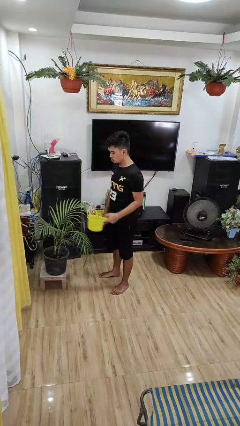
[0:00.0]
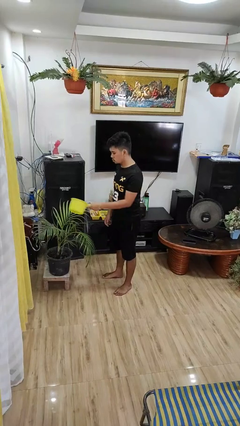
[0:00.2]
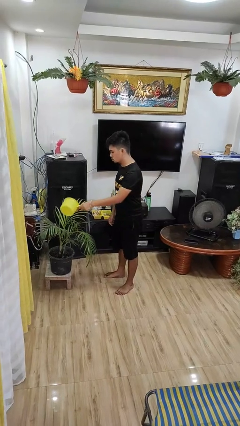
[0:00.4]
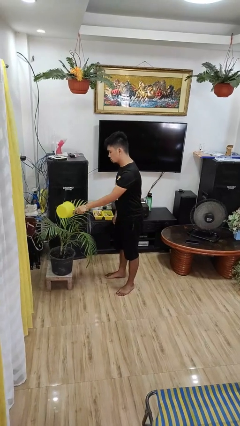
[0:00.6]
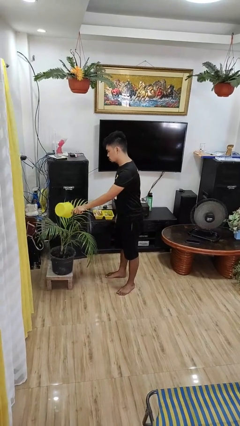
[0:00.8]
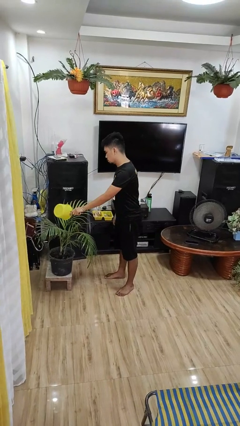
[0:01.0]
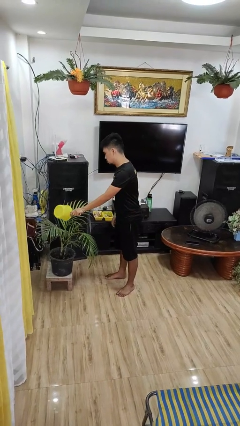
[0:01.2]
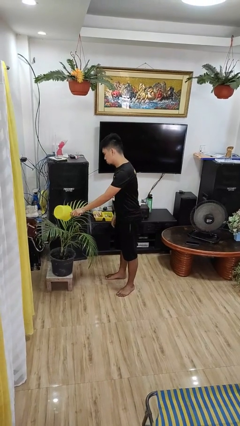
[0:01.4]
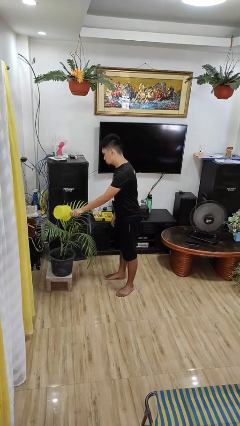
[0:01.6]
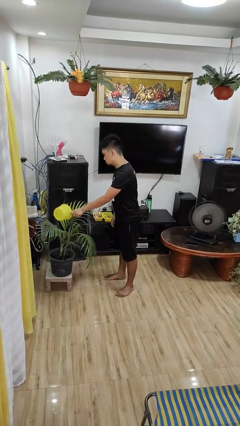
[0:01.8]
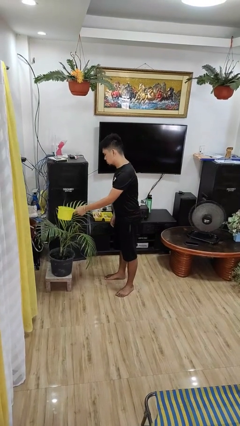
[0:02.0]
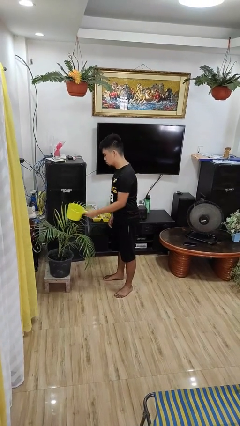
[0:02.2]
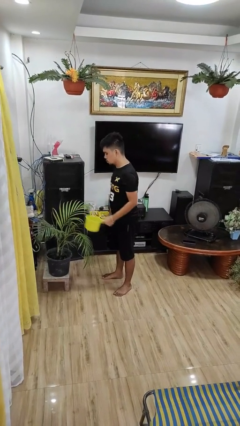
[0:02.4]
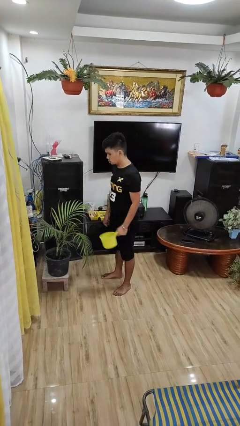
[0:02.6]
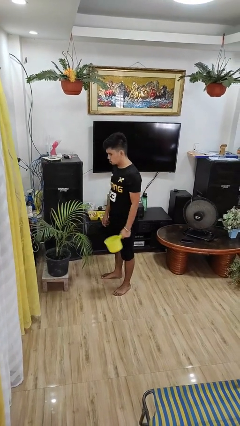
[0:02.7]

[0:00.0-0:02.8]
person waters houseplant

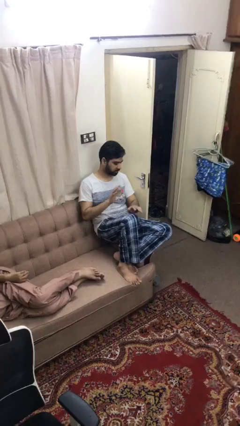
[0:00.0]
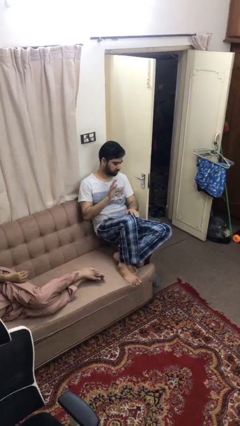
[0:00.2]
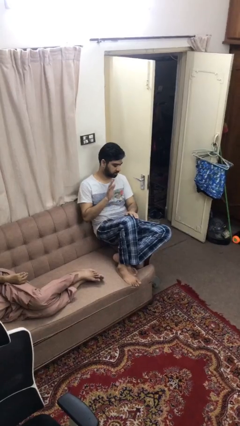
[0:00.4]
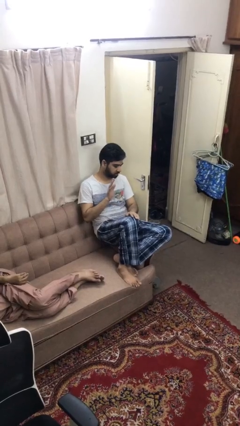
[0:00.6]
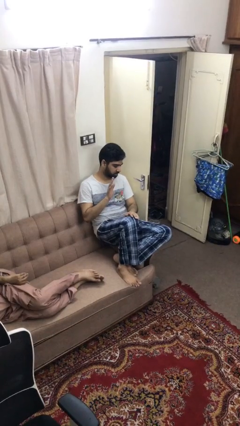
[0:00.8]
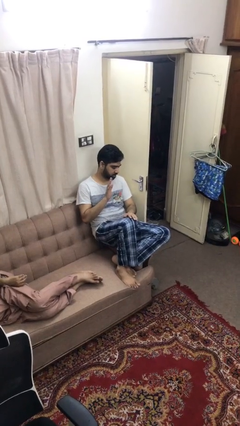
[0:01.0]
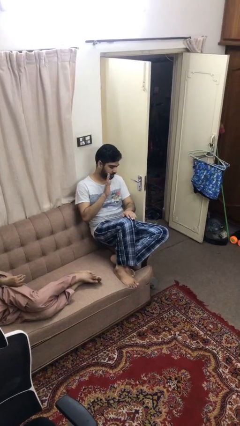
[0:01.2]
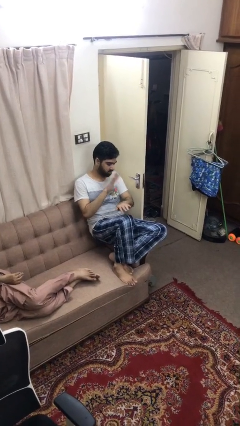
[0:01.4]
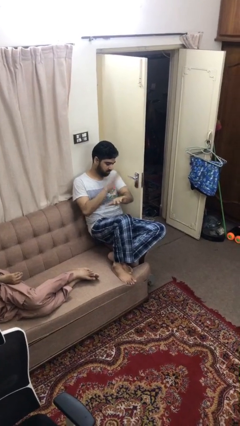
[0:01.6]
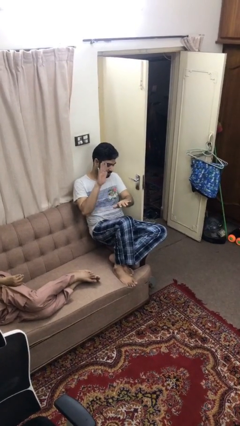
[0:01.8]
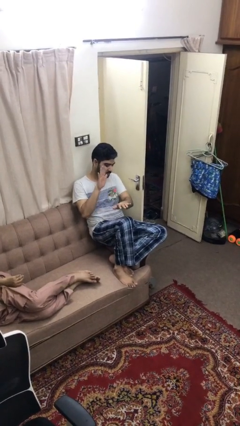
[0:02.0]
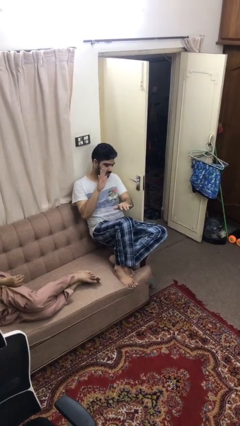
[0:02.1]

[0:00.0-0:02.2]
person swats bug

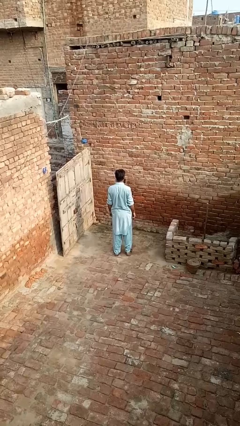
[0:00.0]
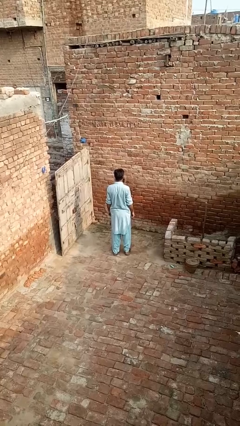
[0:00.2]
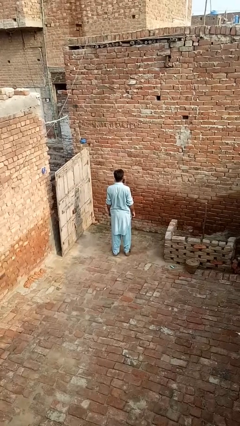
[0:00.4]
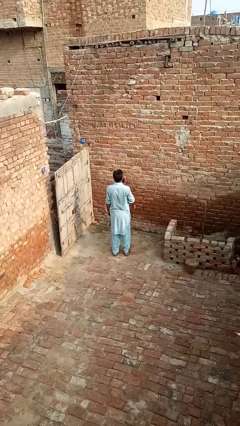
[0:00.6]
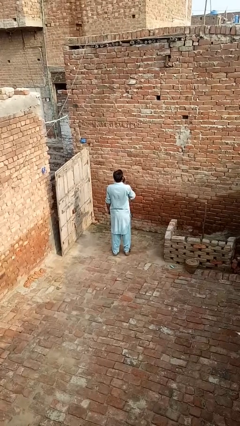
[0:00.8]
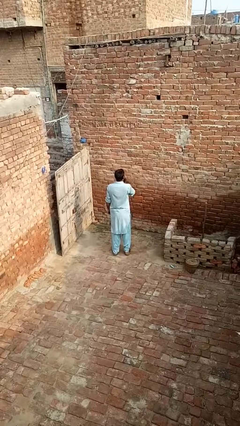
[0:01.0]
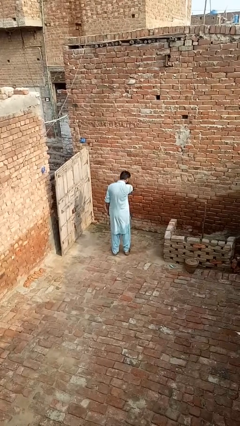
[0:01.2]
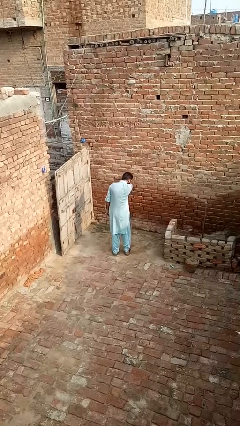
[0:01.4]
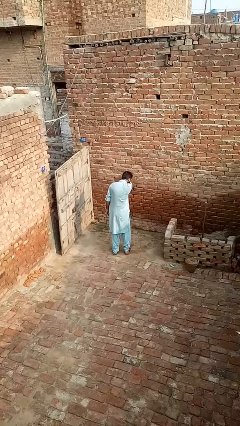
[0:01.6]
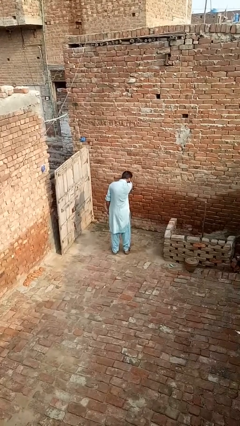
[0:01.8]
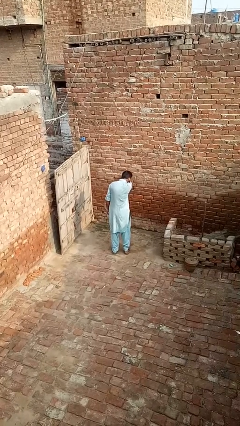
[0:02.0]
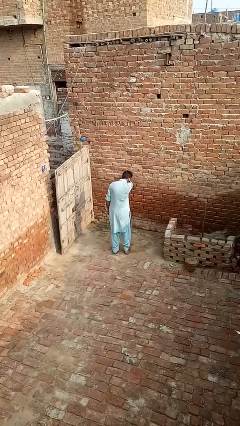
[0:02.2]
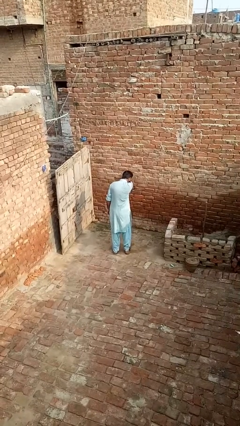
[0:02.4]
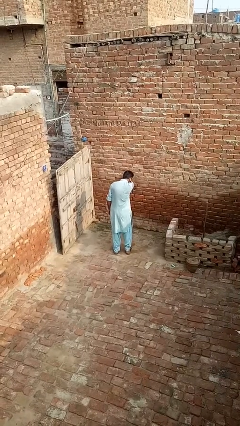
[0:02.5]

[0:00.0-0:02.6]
person sneezes into arm

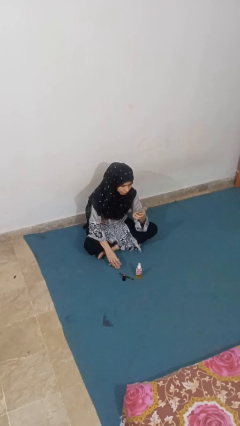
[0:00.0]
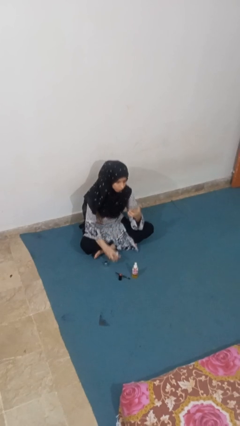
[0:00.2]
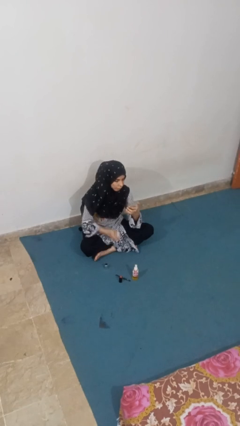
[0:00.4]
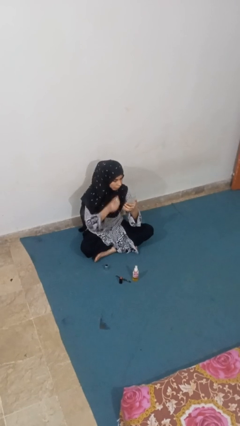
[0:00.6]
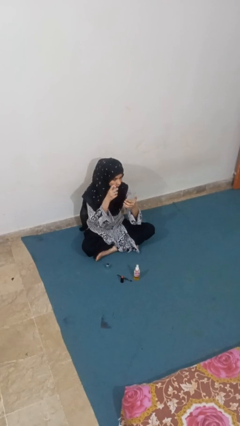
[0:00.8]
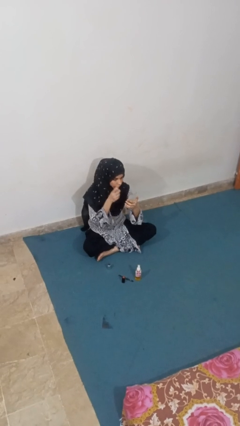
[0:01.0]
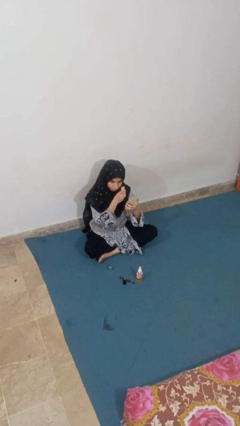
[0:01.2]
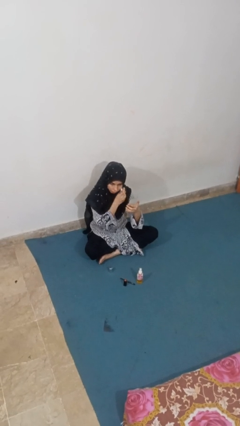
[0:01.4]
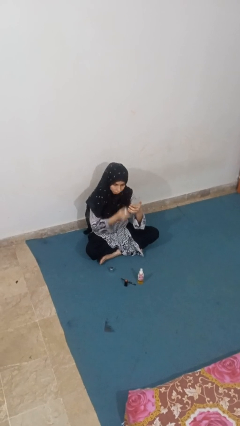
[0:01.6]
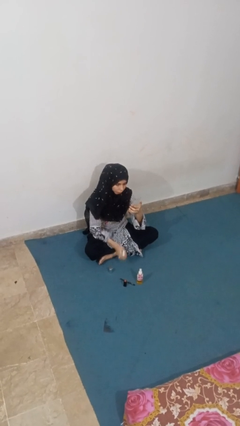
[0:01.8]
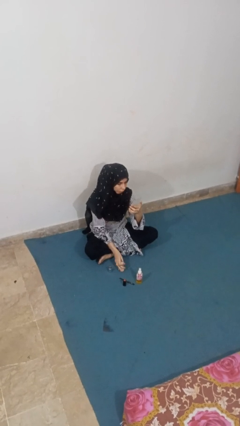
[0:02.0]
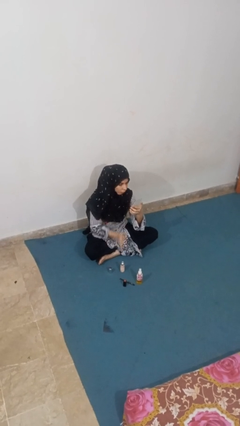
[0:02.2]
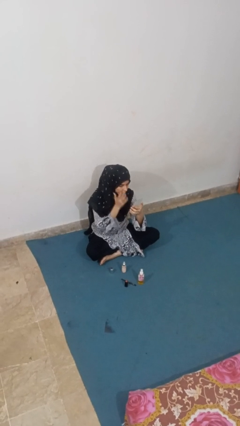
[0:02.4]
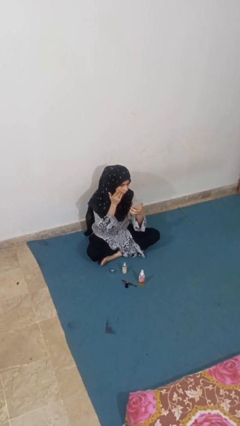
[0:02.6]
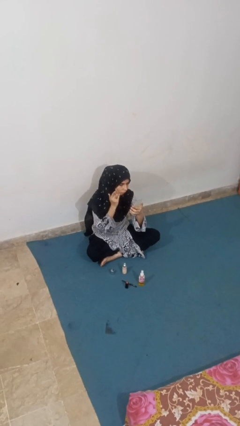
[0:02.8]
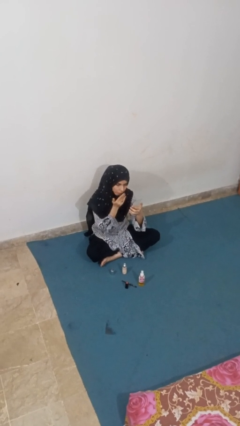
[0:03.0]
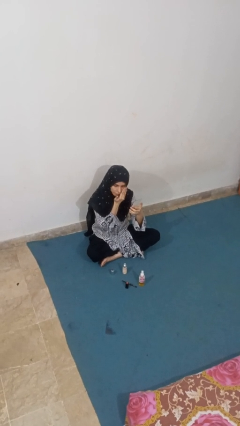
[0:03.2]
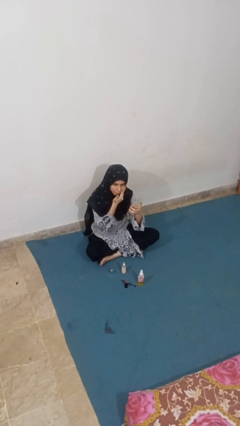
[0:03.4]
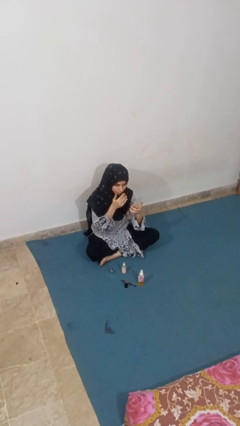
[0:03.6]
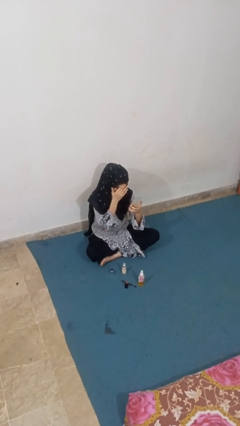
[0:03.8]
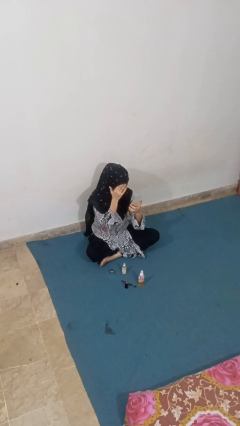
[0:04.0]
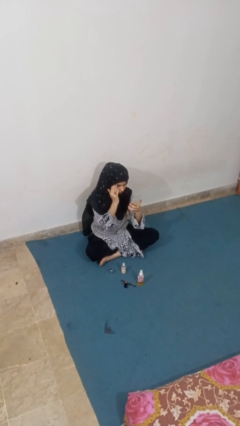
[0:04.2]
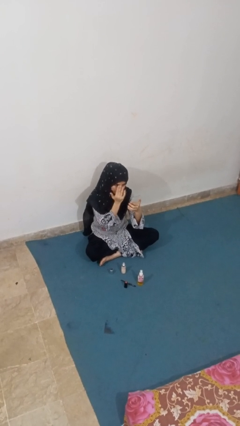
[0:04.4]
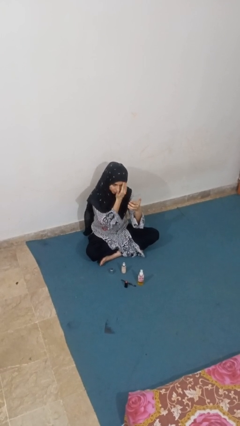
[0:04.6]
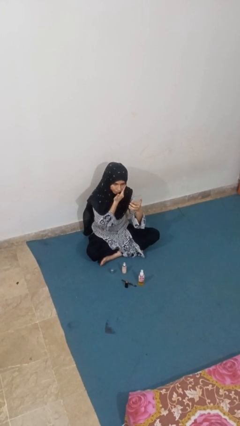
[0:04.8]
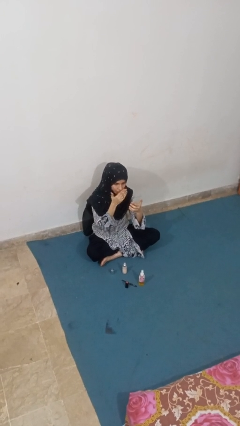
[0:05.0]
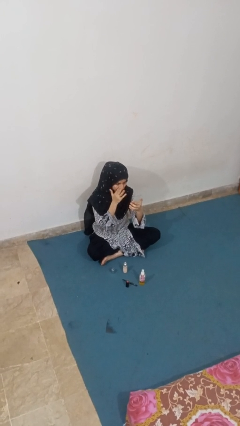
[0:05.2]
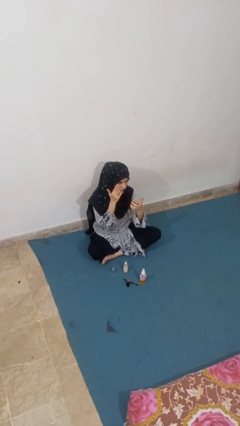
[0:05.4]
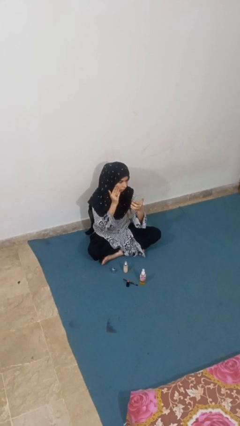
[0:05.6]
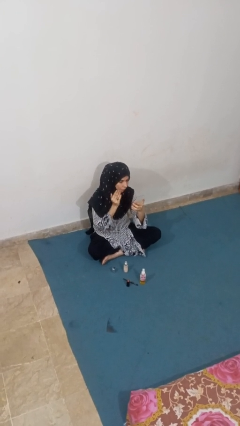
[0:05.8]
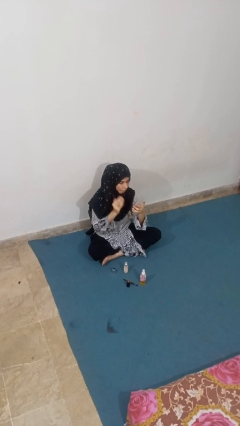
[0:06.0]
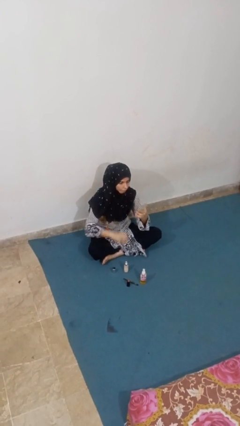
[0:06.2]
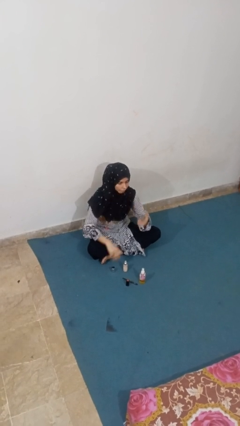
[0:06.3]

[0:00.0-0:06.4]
person applies foundation makeup

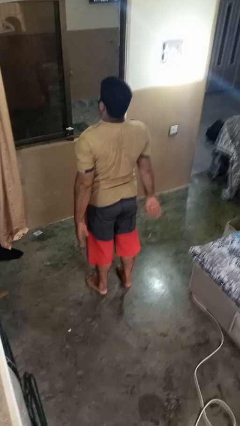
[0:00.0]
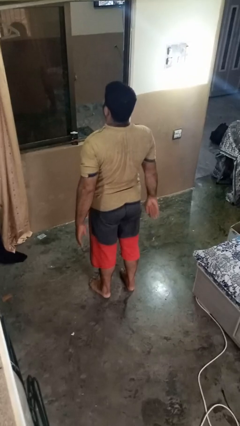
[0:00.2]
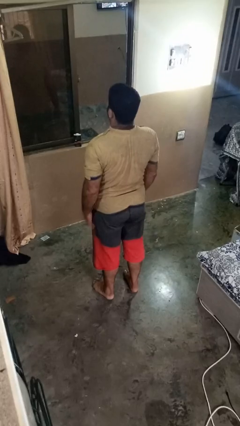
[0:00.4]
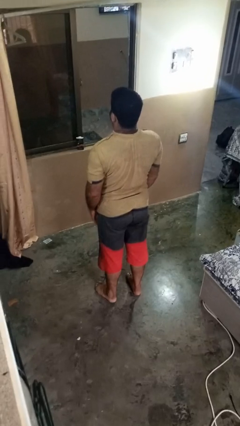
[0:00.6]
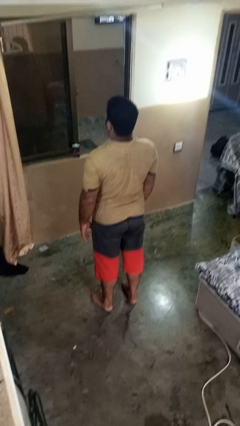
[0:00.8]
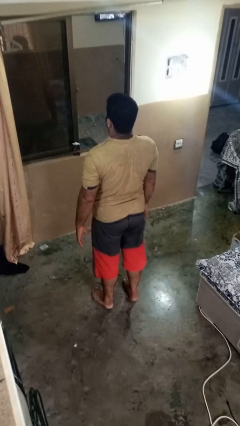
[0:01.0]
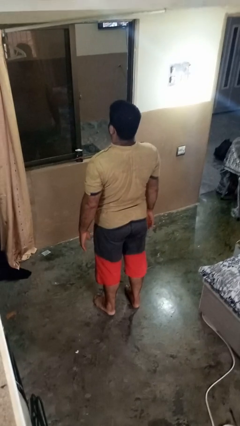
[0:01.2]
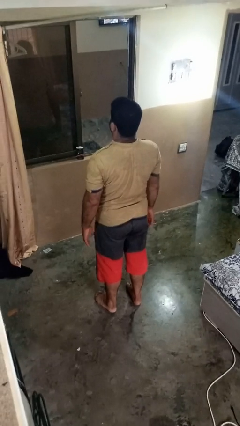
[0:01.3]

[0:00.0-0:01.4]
person stands up

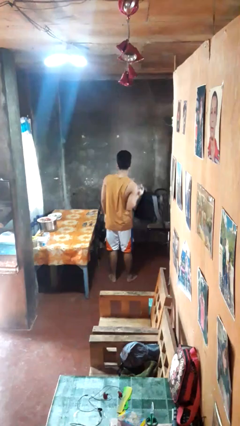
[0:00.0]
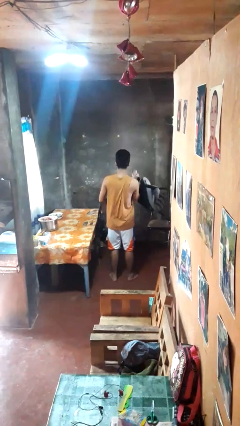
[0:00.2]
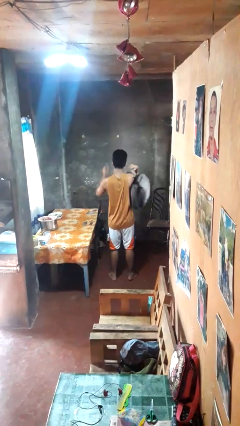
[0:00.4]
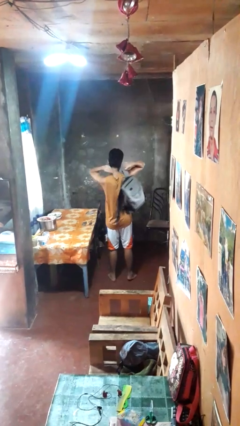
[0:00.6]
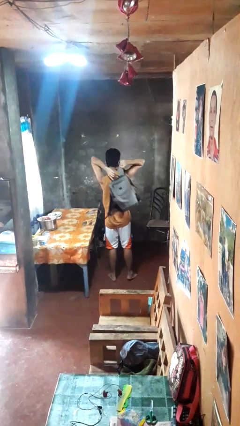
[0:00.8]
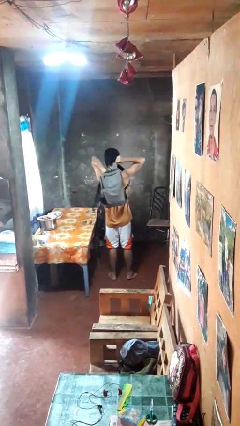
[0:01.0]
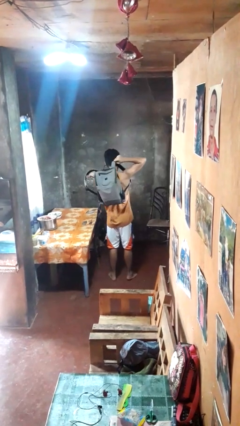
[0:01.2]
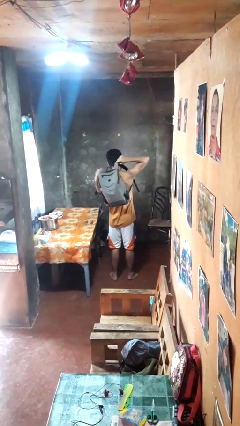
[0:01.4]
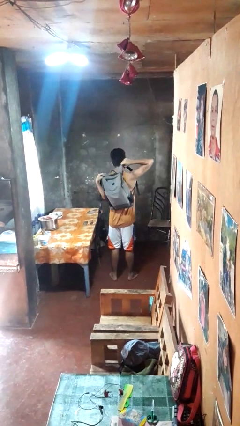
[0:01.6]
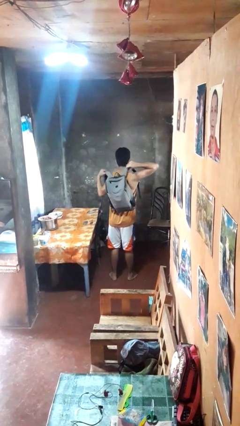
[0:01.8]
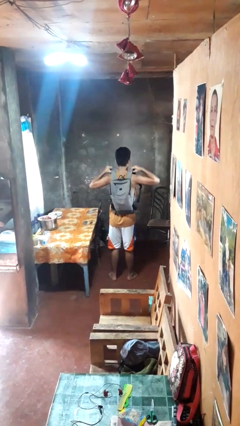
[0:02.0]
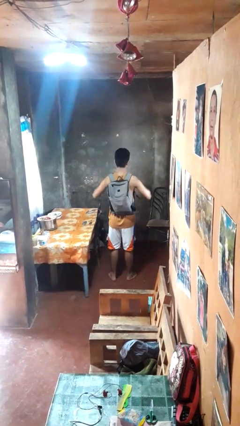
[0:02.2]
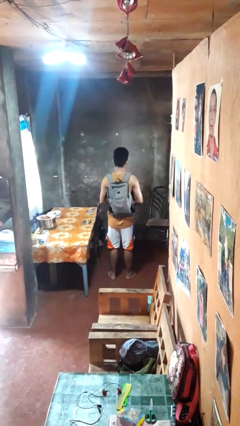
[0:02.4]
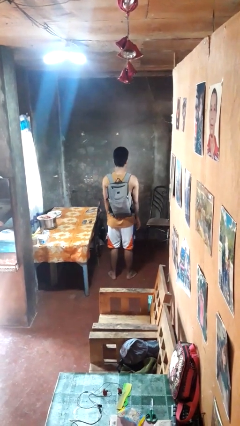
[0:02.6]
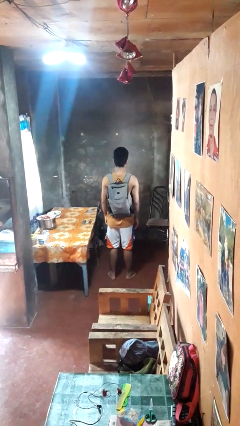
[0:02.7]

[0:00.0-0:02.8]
person puts on backpack
